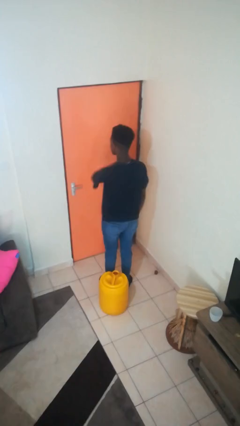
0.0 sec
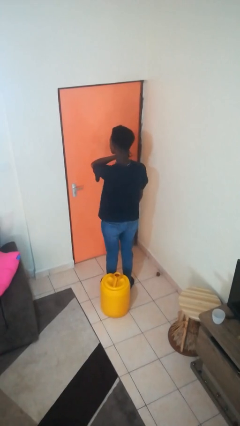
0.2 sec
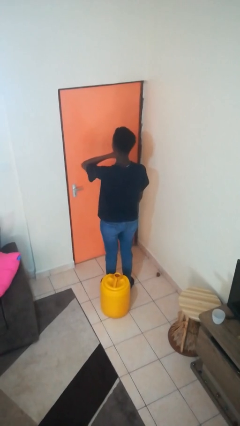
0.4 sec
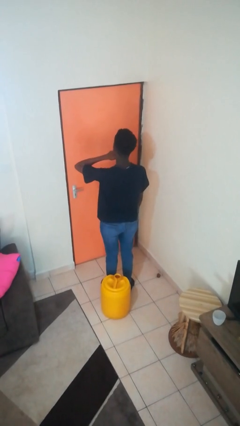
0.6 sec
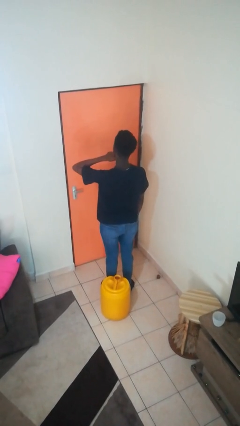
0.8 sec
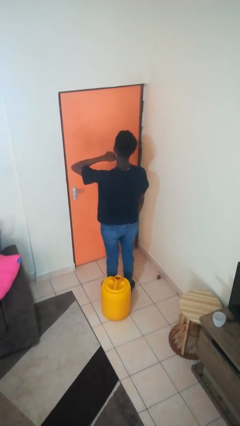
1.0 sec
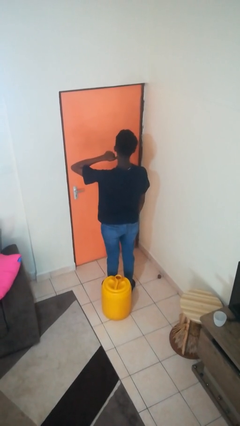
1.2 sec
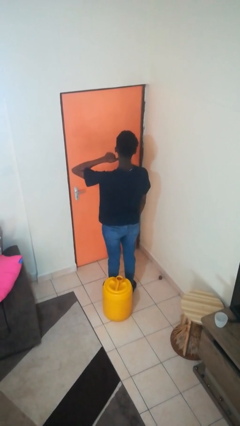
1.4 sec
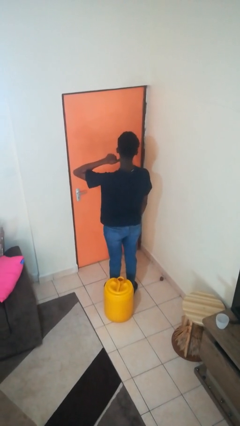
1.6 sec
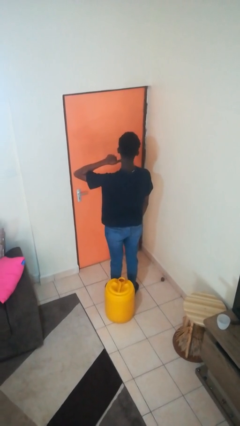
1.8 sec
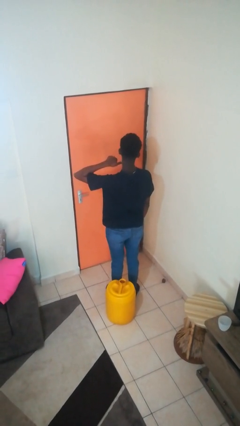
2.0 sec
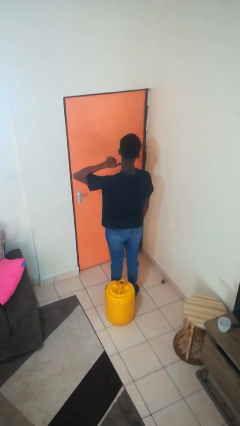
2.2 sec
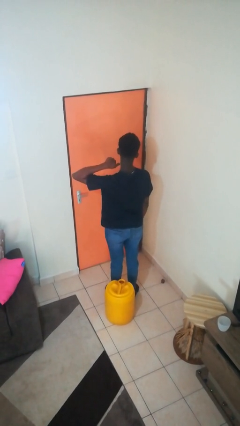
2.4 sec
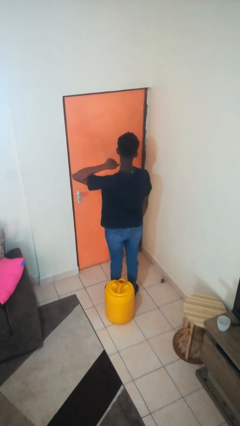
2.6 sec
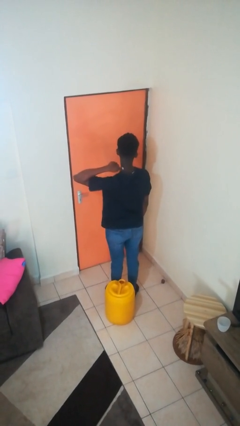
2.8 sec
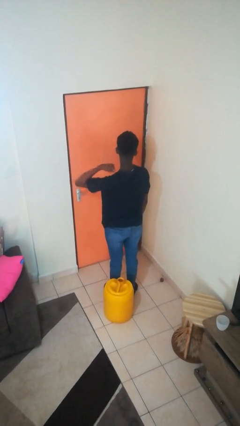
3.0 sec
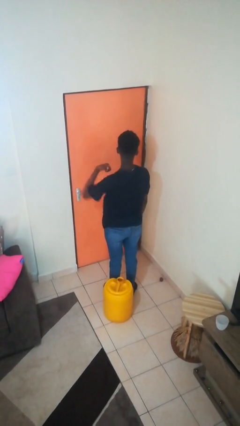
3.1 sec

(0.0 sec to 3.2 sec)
person gestures cut

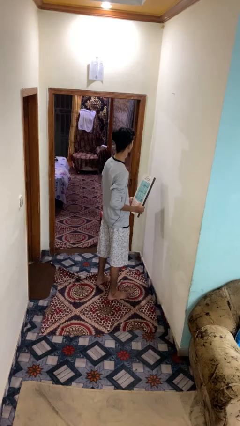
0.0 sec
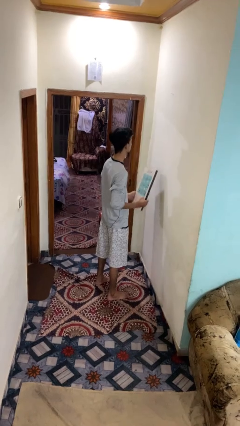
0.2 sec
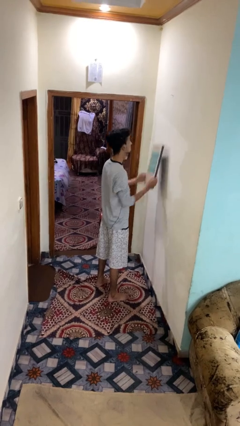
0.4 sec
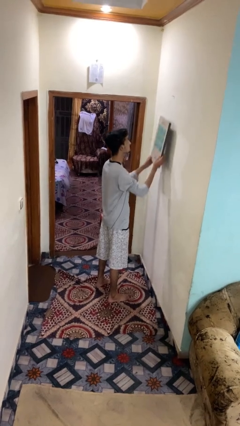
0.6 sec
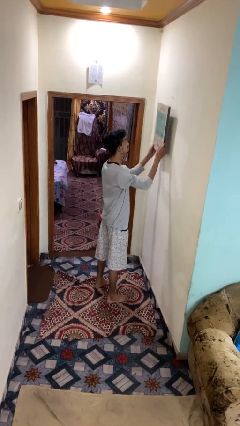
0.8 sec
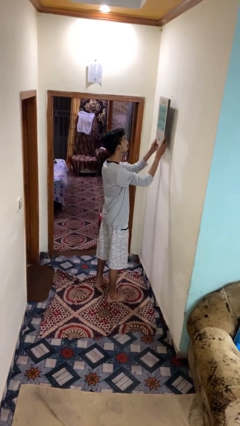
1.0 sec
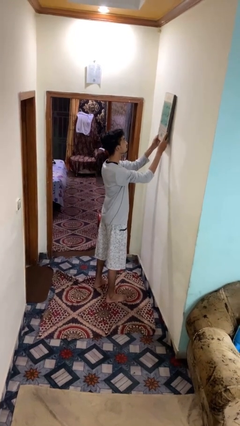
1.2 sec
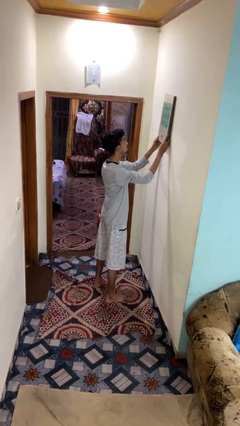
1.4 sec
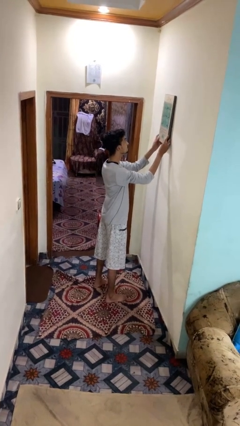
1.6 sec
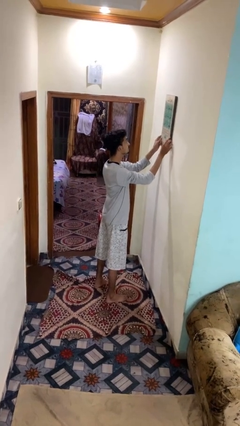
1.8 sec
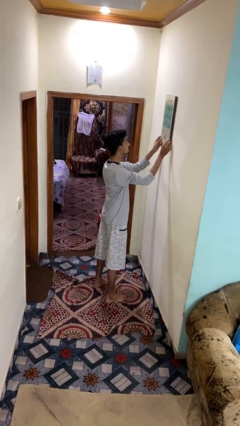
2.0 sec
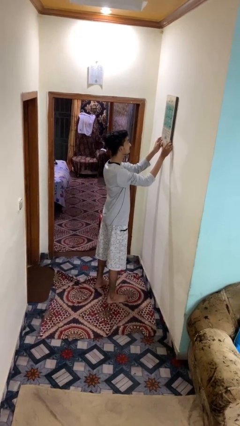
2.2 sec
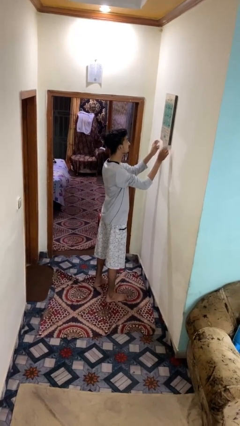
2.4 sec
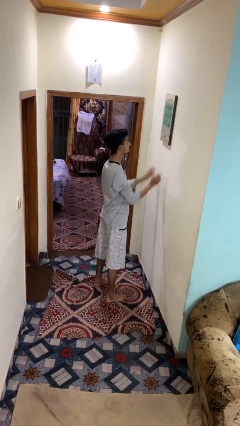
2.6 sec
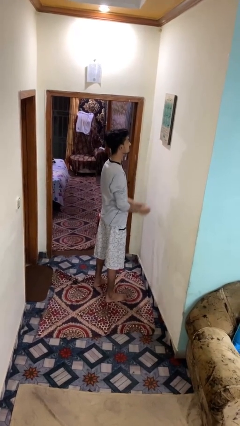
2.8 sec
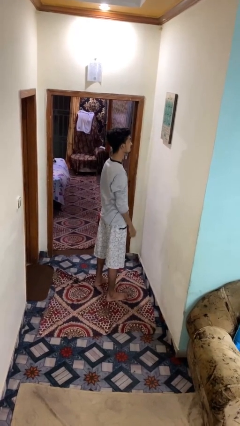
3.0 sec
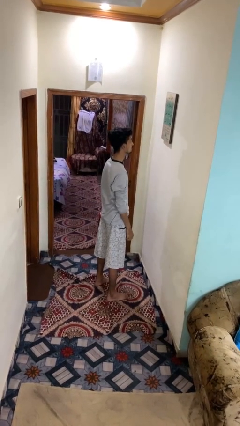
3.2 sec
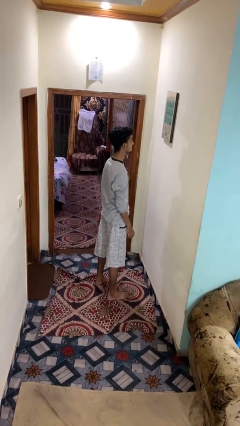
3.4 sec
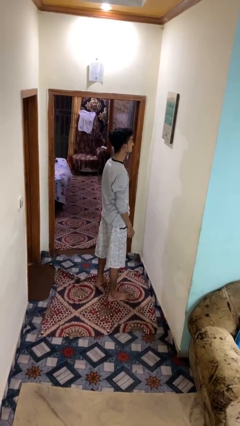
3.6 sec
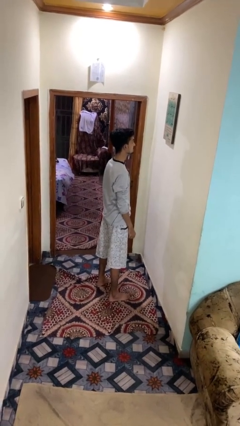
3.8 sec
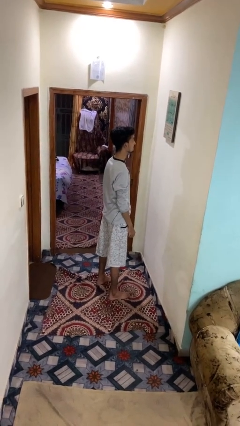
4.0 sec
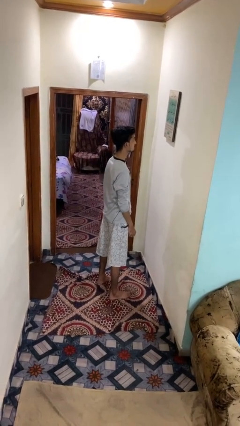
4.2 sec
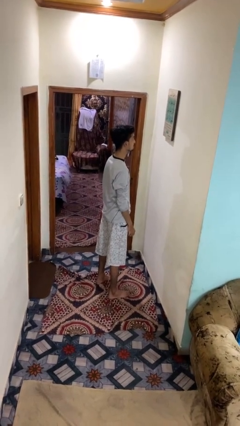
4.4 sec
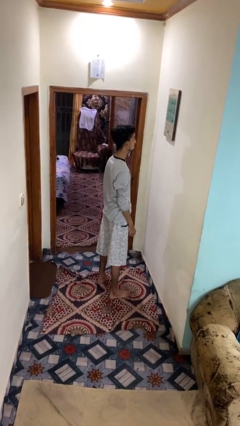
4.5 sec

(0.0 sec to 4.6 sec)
person puts up picture frame

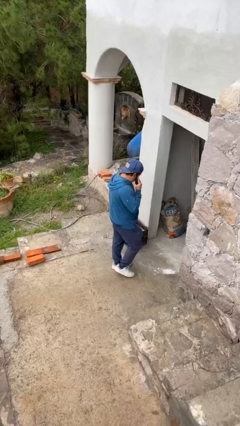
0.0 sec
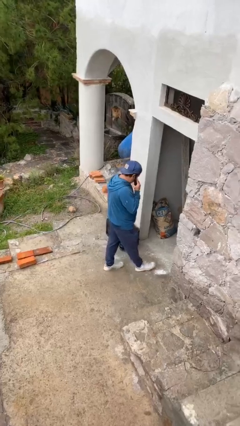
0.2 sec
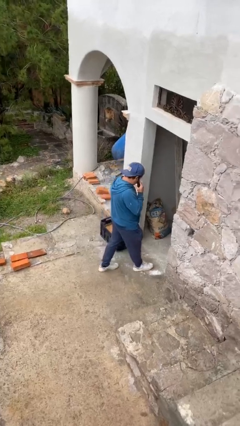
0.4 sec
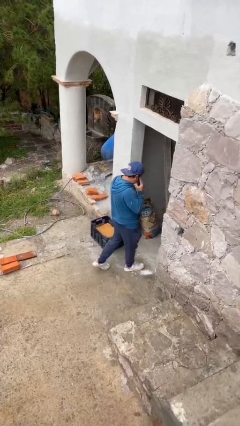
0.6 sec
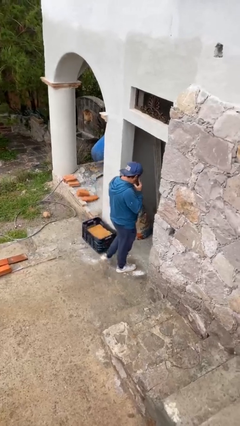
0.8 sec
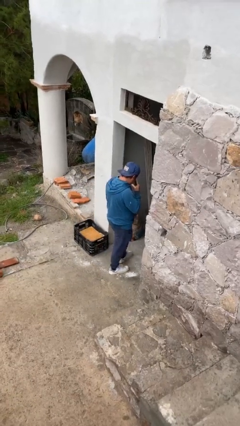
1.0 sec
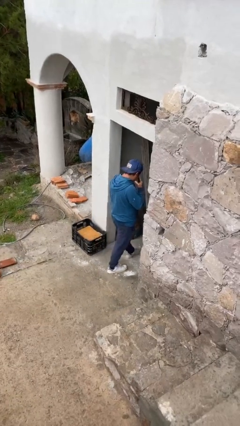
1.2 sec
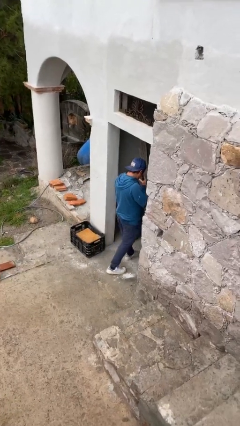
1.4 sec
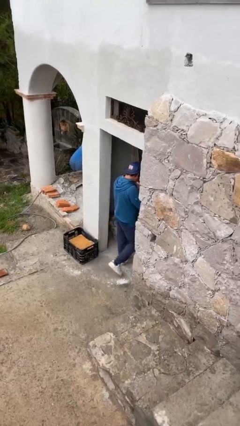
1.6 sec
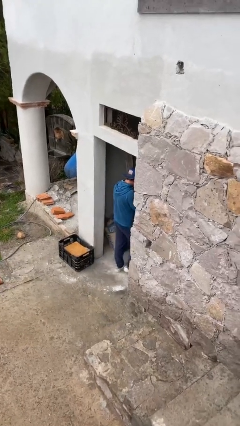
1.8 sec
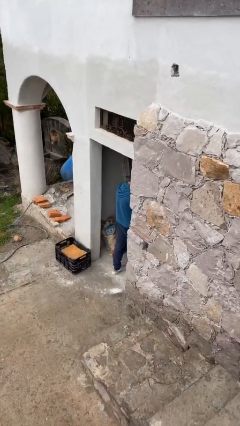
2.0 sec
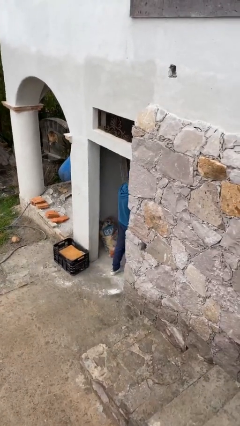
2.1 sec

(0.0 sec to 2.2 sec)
person exits scene through structure

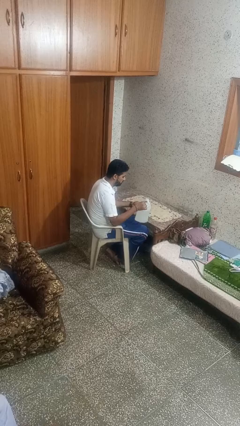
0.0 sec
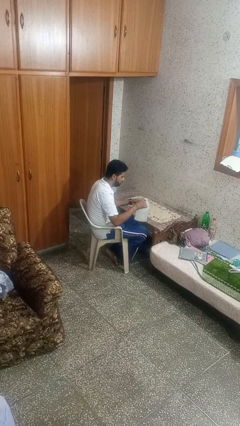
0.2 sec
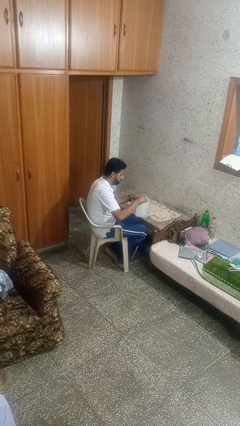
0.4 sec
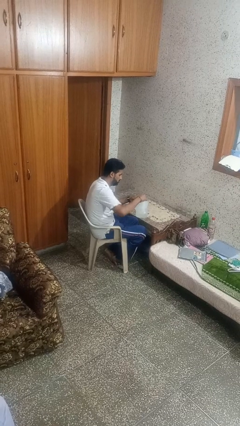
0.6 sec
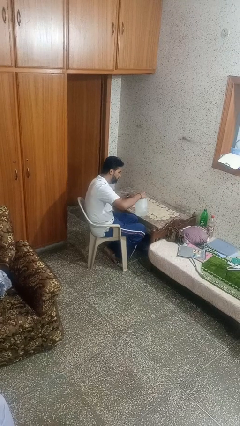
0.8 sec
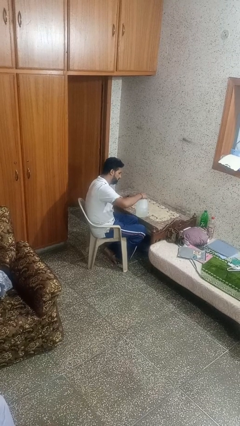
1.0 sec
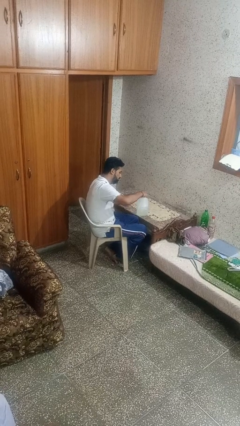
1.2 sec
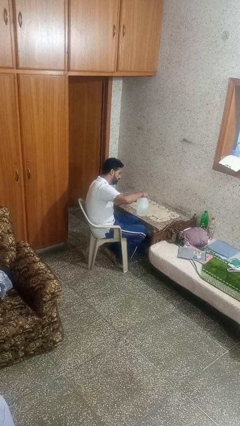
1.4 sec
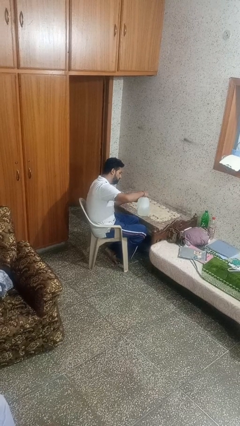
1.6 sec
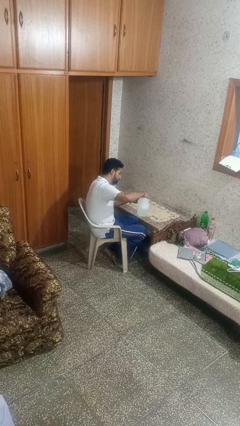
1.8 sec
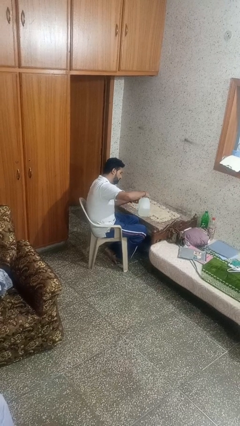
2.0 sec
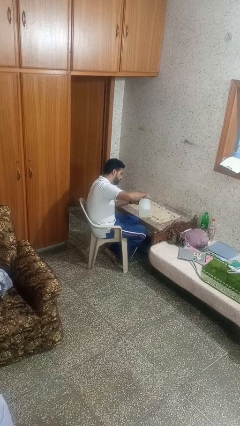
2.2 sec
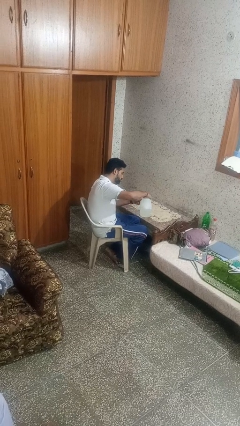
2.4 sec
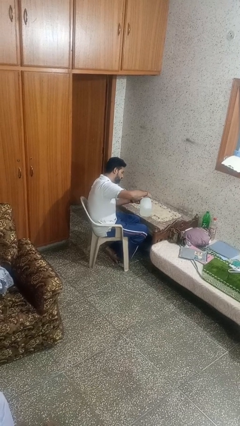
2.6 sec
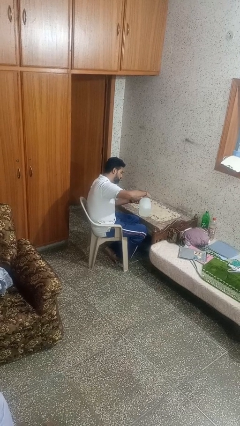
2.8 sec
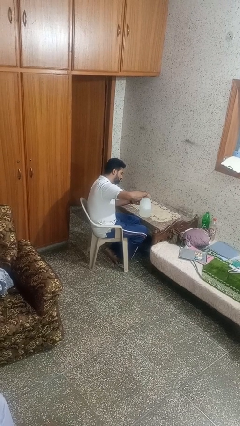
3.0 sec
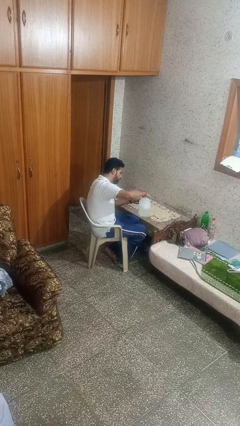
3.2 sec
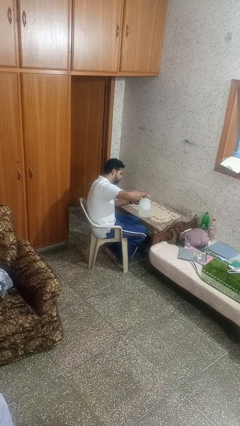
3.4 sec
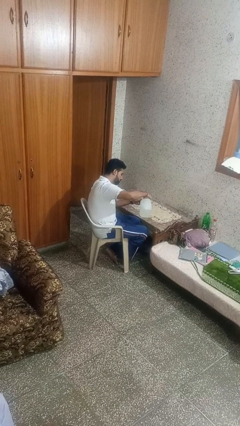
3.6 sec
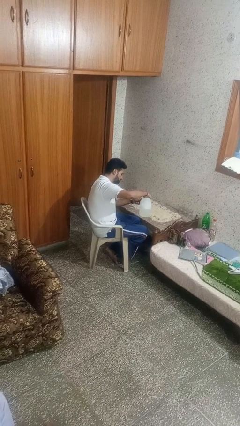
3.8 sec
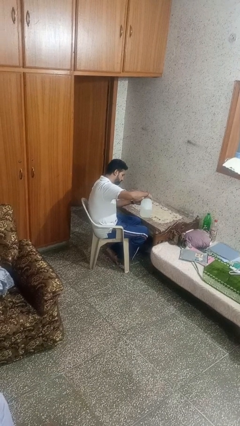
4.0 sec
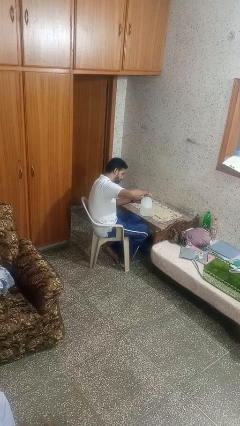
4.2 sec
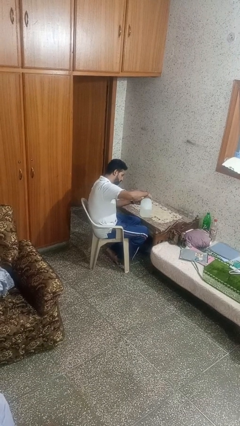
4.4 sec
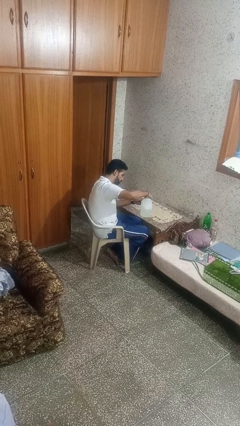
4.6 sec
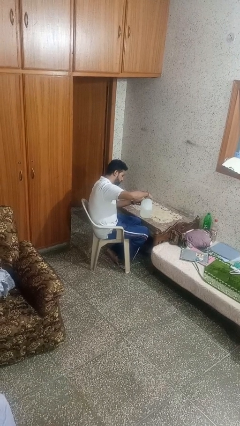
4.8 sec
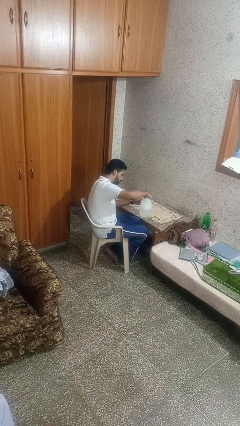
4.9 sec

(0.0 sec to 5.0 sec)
person pours liquid into cup

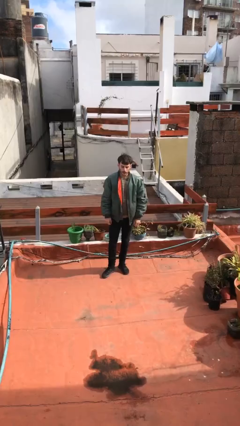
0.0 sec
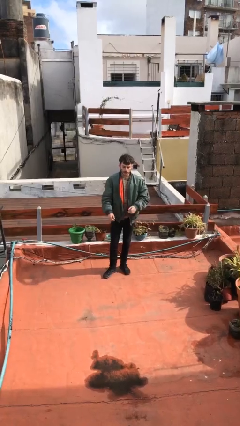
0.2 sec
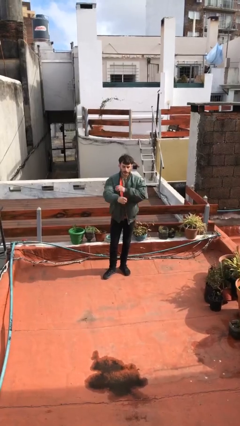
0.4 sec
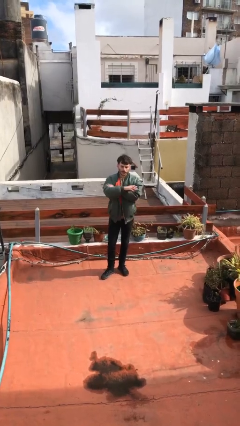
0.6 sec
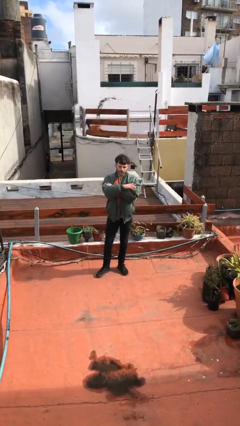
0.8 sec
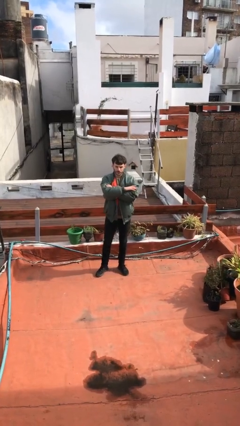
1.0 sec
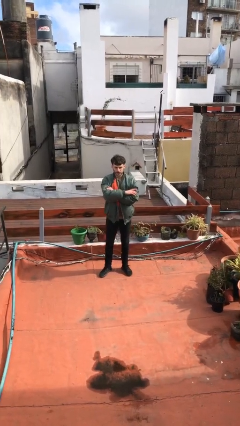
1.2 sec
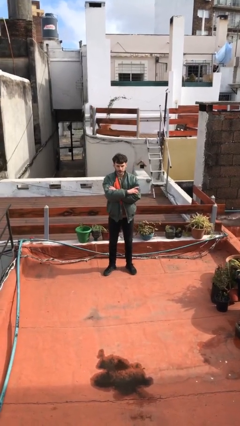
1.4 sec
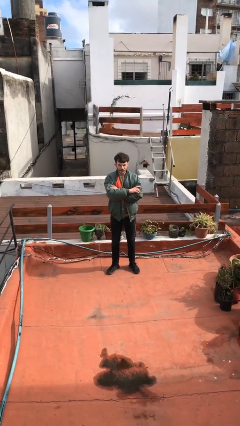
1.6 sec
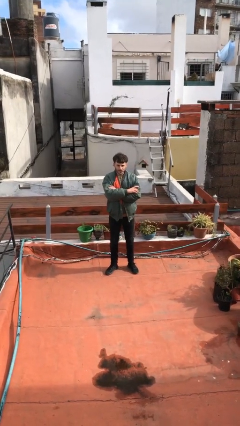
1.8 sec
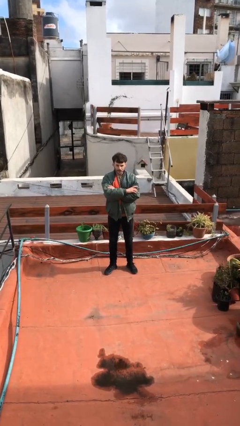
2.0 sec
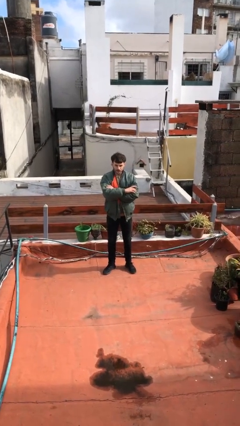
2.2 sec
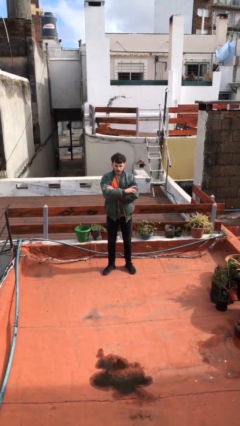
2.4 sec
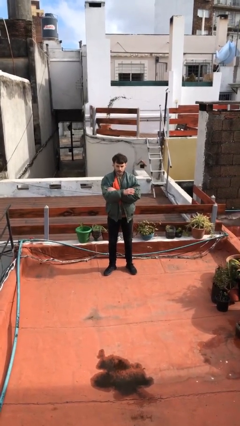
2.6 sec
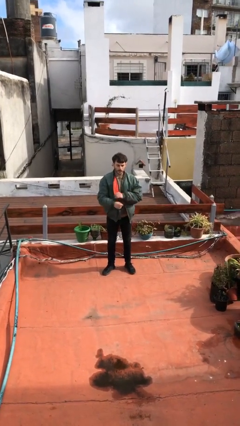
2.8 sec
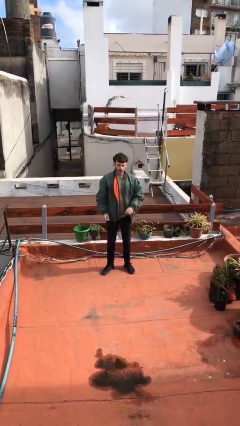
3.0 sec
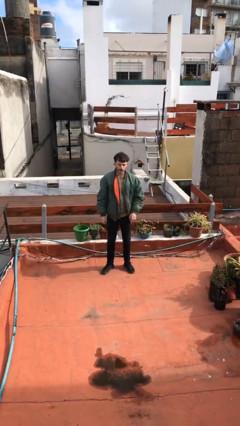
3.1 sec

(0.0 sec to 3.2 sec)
person crosses arms
